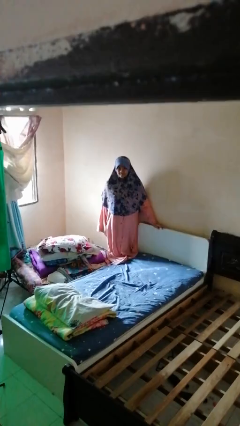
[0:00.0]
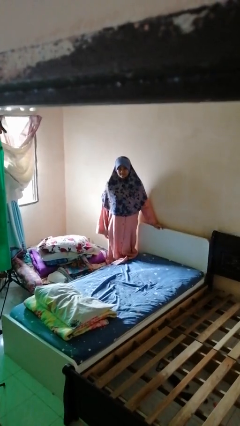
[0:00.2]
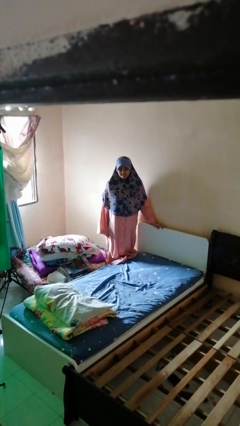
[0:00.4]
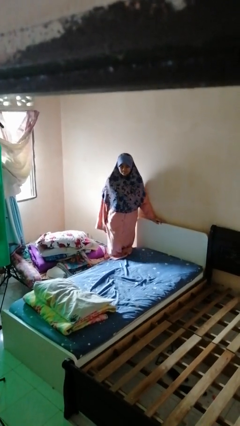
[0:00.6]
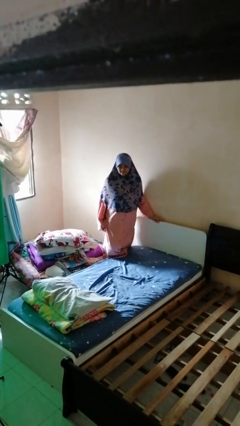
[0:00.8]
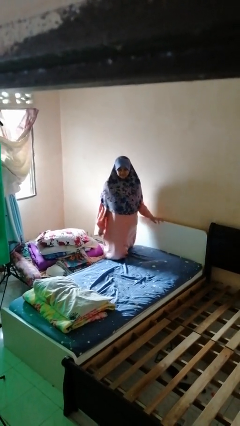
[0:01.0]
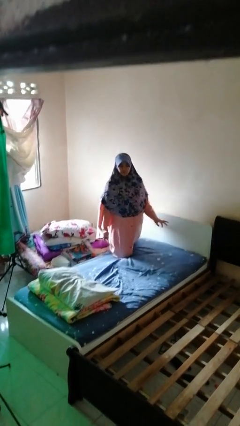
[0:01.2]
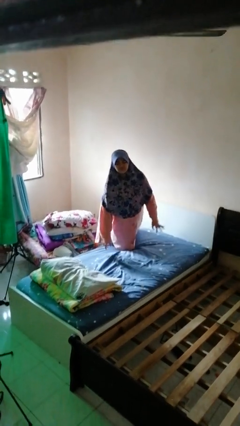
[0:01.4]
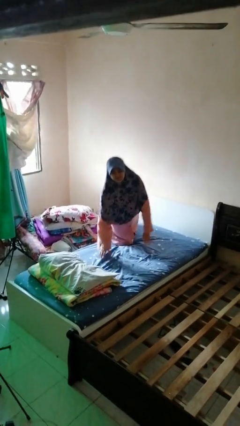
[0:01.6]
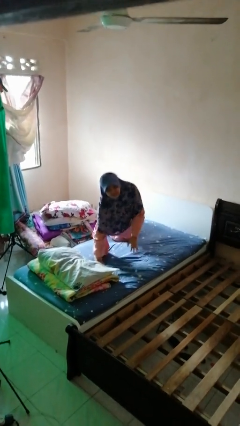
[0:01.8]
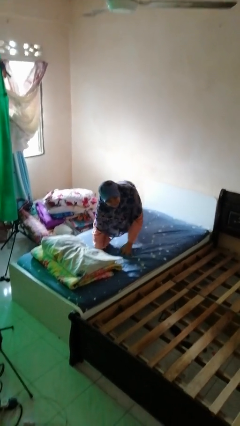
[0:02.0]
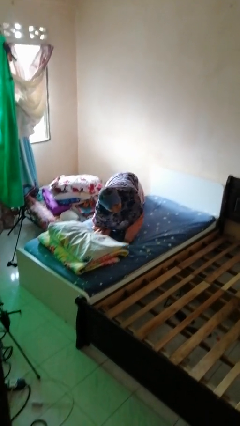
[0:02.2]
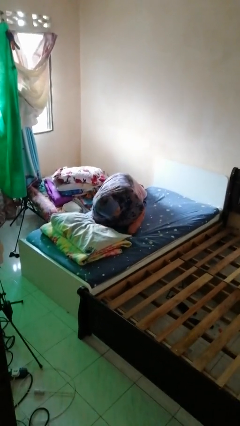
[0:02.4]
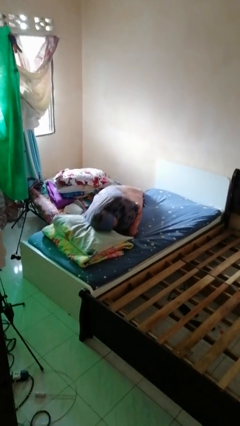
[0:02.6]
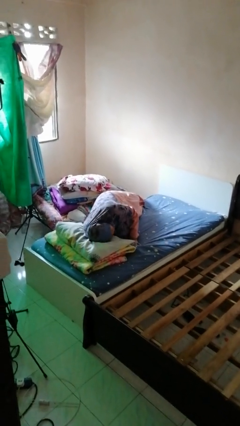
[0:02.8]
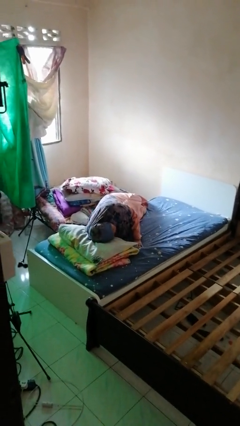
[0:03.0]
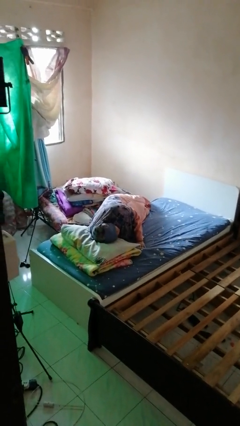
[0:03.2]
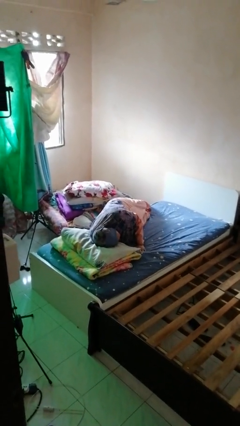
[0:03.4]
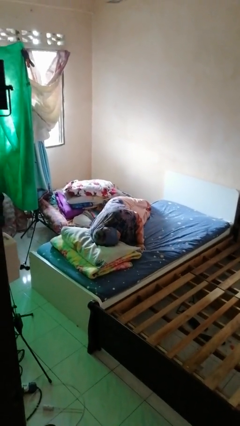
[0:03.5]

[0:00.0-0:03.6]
person lies down on bed

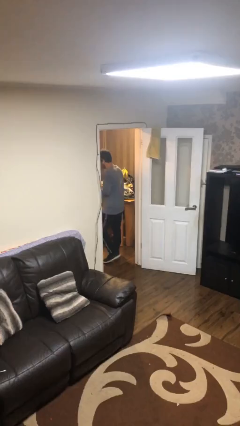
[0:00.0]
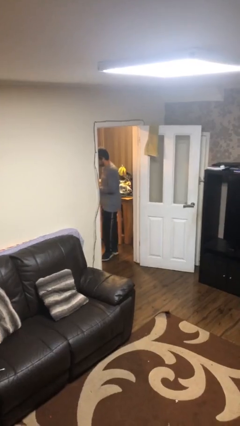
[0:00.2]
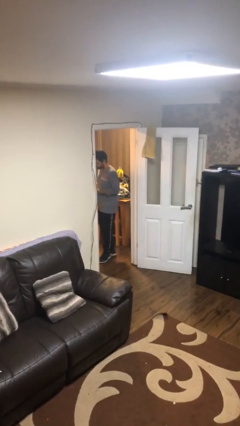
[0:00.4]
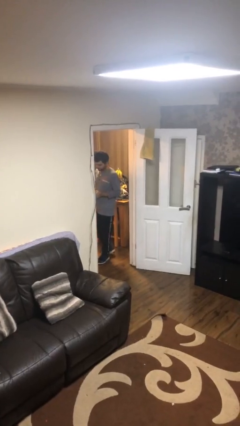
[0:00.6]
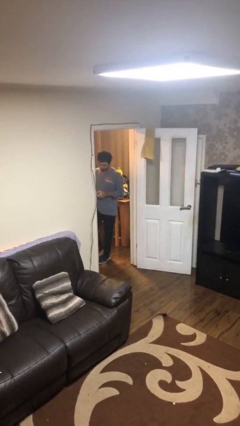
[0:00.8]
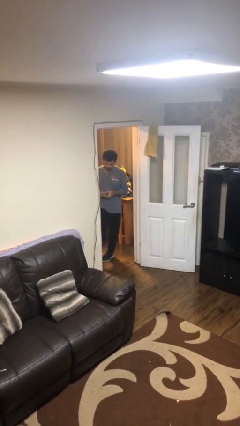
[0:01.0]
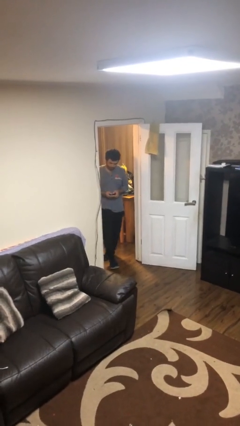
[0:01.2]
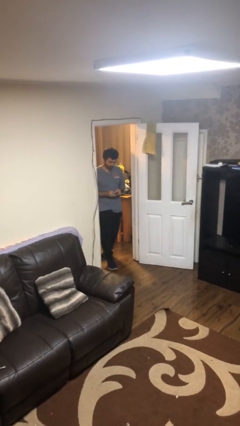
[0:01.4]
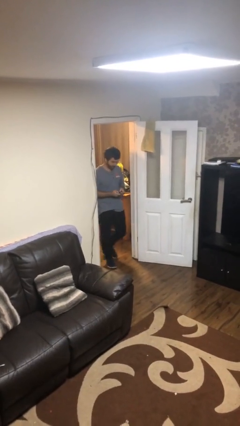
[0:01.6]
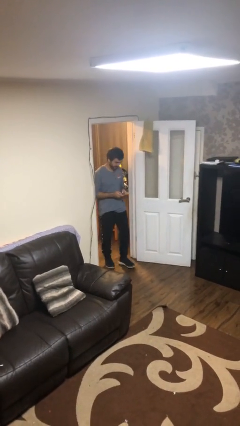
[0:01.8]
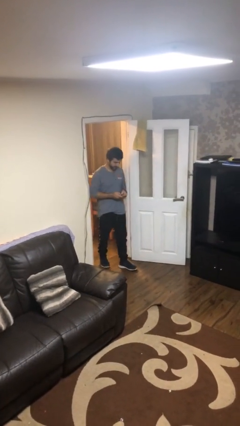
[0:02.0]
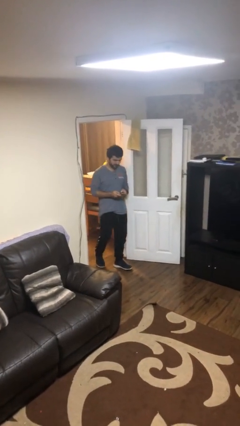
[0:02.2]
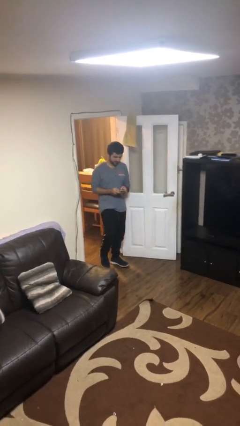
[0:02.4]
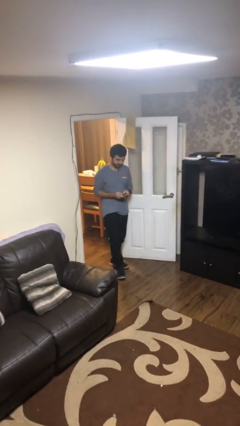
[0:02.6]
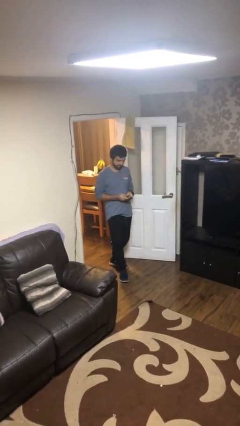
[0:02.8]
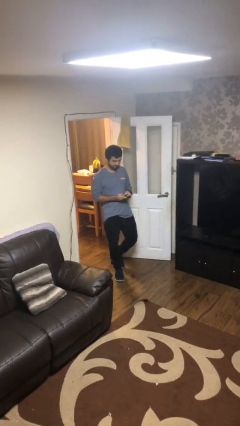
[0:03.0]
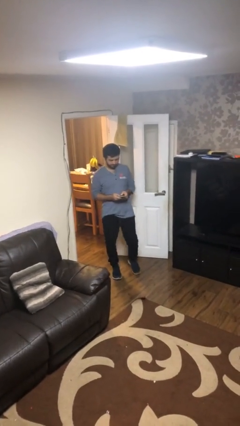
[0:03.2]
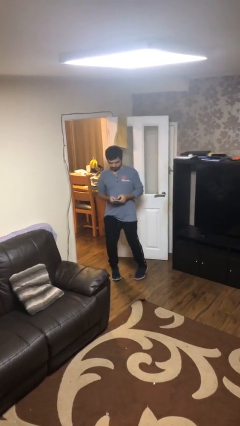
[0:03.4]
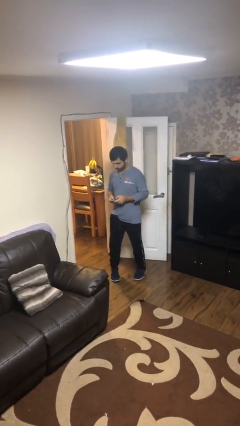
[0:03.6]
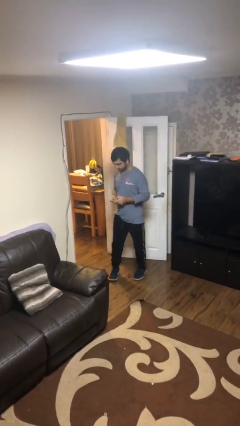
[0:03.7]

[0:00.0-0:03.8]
person enters scene through structure

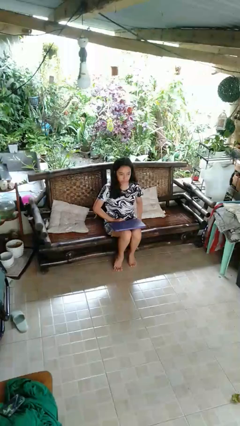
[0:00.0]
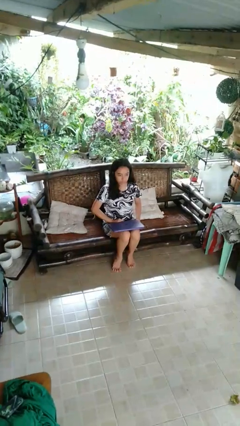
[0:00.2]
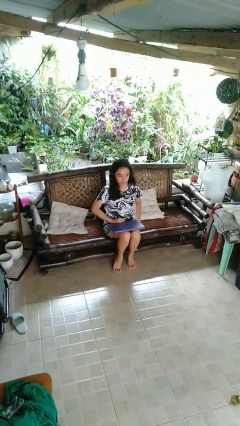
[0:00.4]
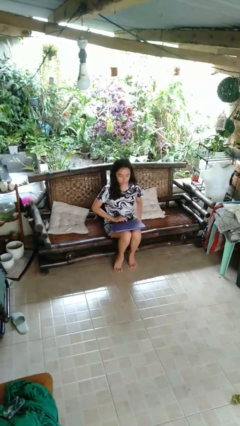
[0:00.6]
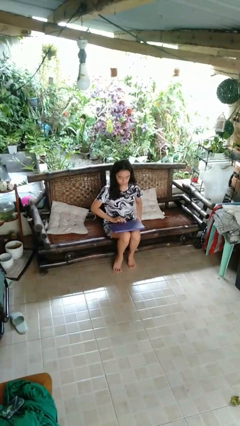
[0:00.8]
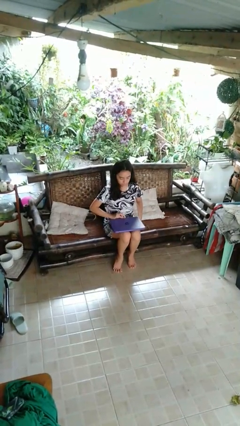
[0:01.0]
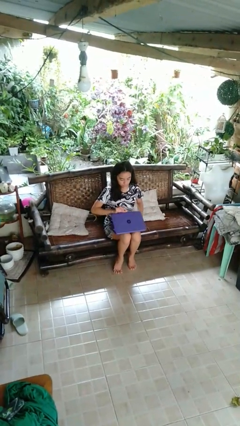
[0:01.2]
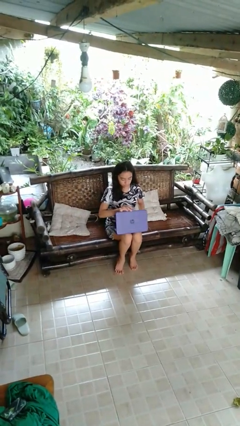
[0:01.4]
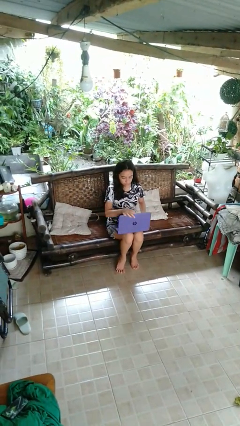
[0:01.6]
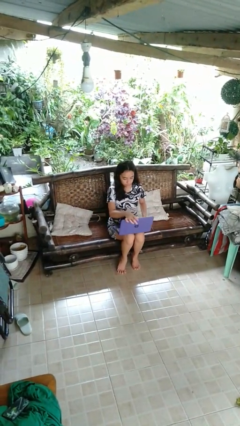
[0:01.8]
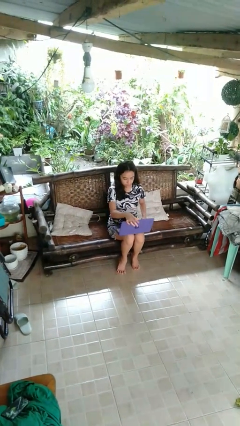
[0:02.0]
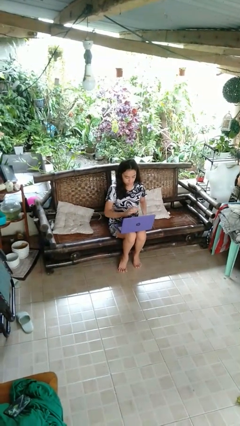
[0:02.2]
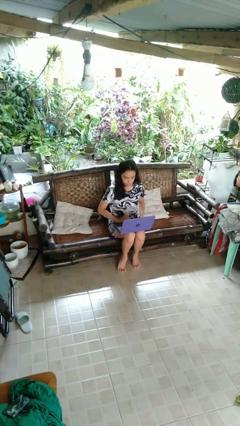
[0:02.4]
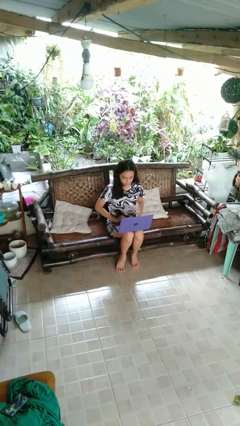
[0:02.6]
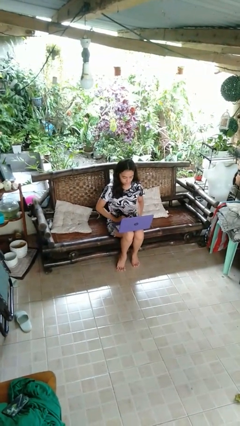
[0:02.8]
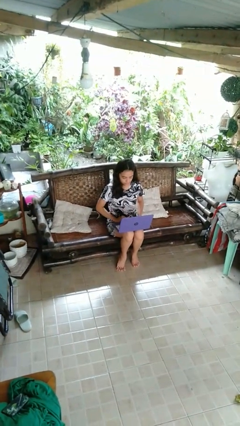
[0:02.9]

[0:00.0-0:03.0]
person opens laptop

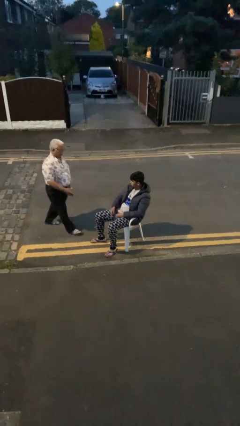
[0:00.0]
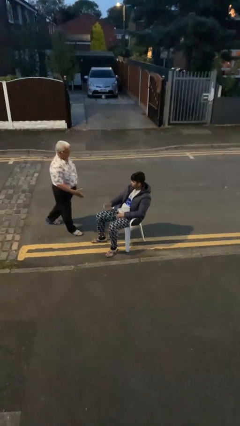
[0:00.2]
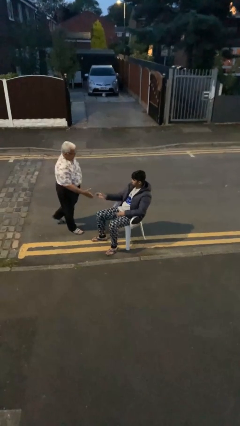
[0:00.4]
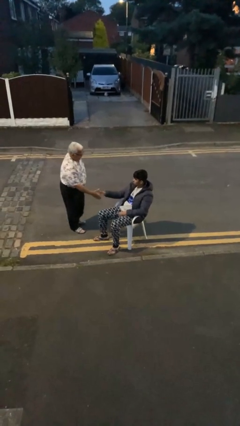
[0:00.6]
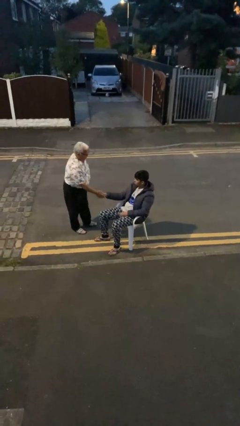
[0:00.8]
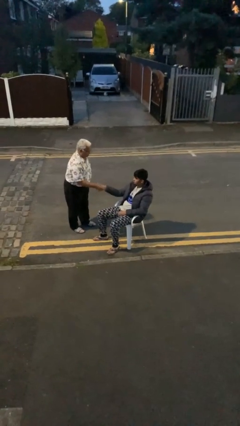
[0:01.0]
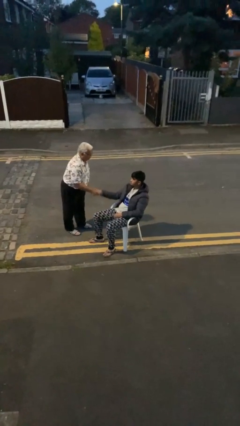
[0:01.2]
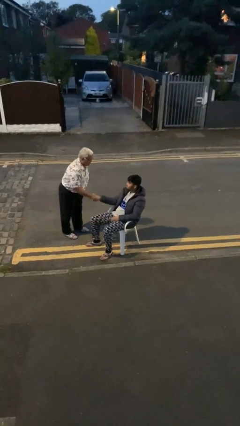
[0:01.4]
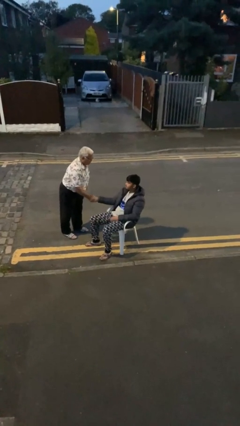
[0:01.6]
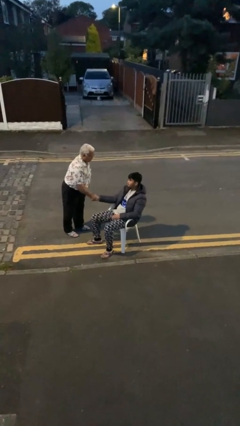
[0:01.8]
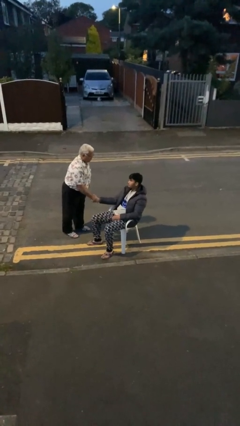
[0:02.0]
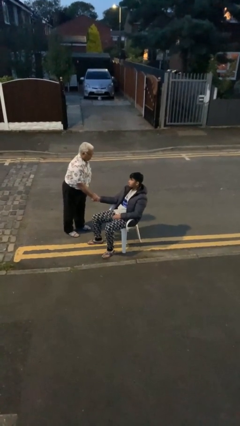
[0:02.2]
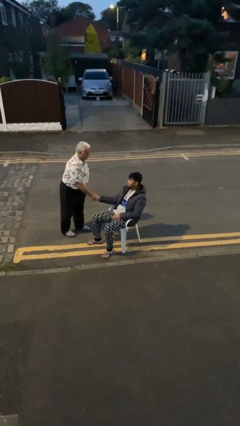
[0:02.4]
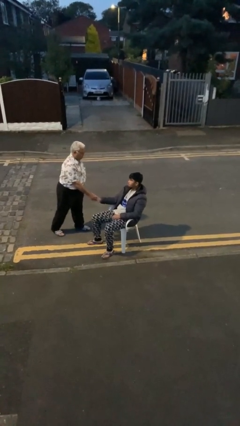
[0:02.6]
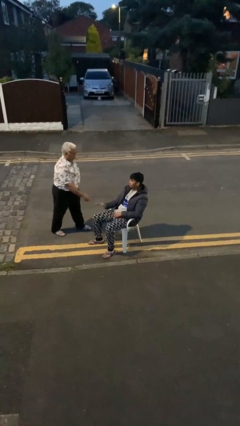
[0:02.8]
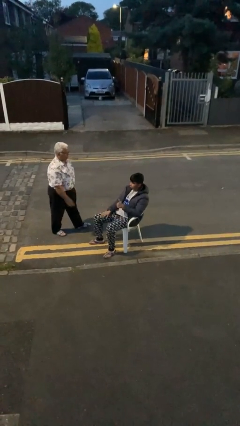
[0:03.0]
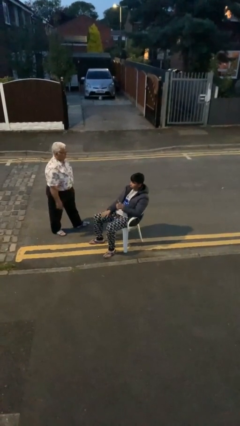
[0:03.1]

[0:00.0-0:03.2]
person shakes hand

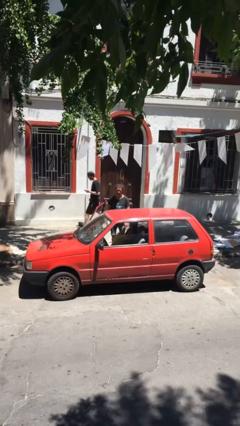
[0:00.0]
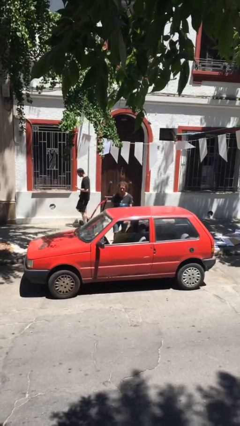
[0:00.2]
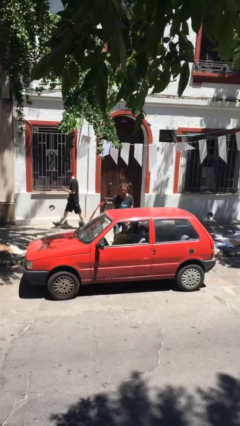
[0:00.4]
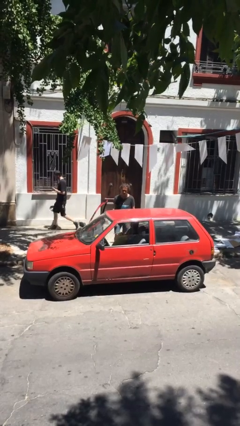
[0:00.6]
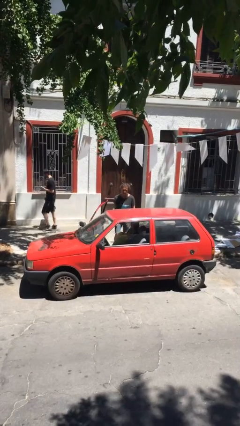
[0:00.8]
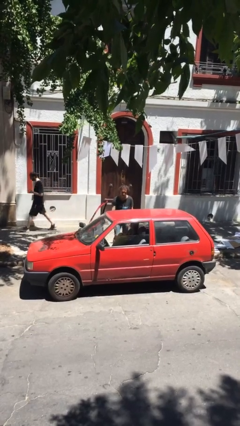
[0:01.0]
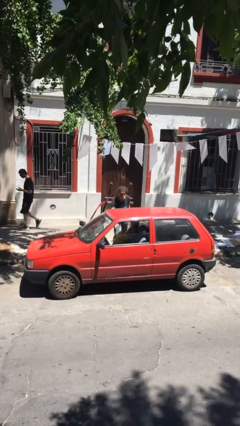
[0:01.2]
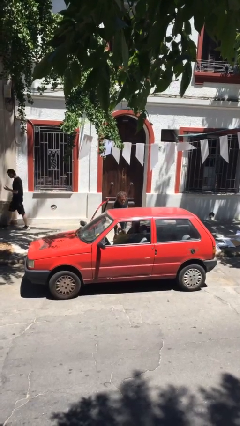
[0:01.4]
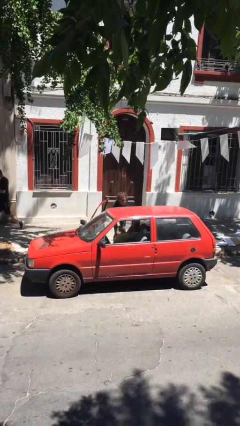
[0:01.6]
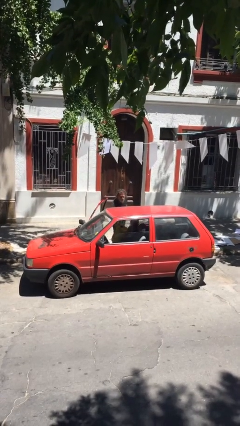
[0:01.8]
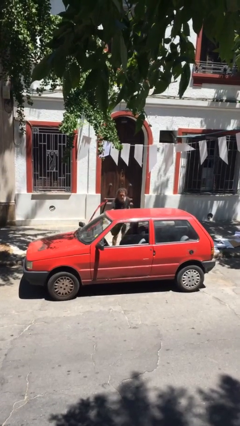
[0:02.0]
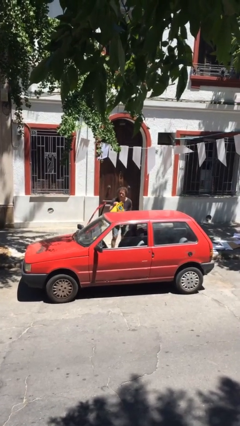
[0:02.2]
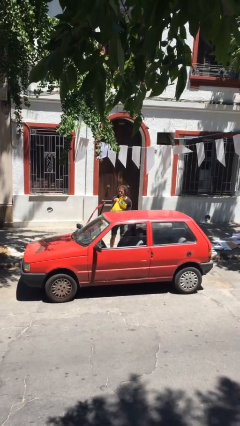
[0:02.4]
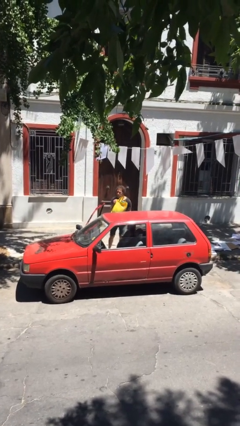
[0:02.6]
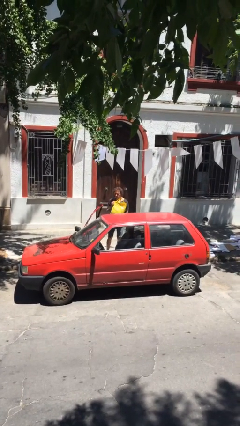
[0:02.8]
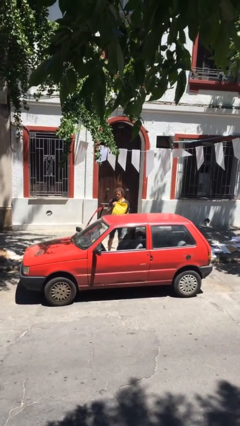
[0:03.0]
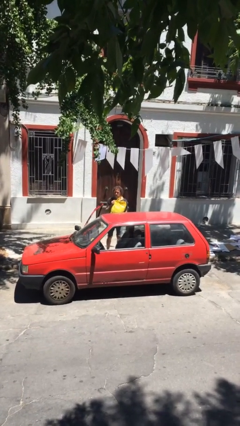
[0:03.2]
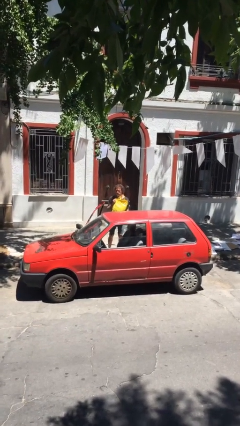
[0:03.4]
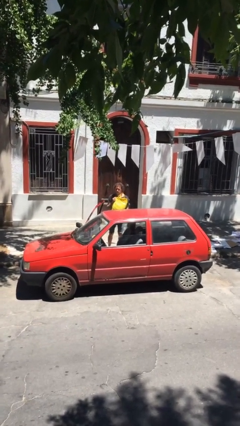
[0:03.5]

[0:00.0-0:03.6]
person unloads car

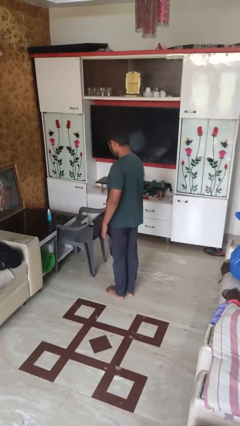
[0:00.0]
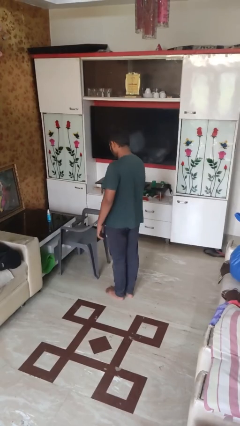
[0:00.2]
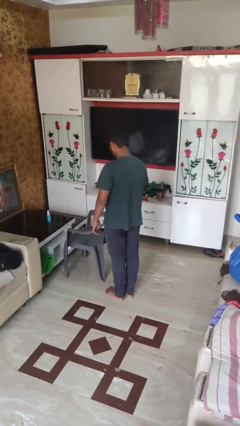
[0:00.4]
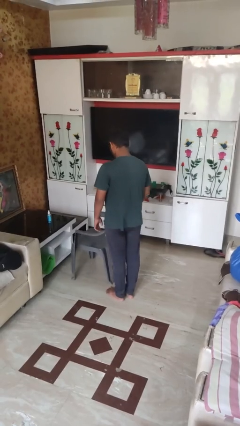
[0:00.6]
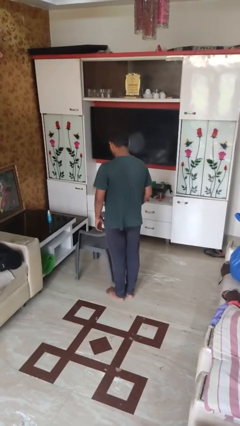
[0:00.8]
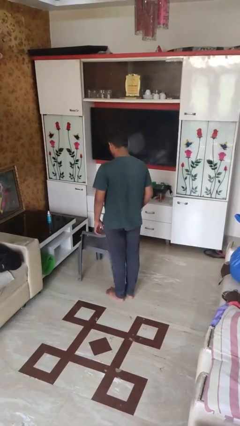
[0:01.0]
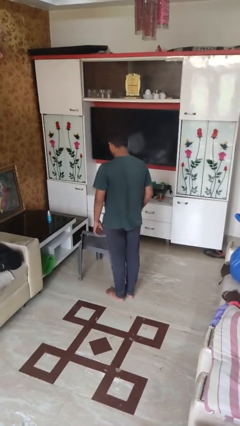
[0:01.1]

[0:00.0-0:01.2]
person pulls out chair
